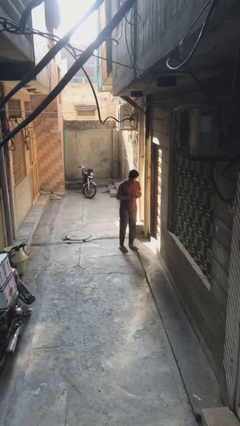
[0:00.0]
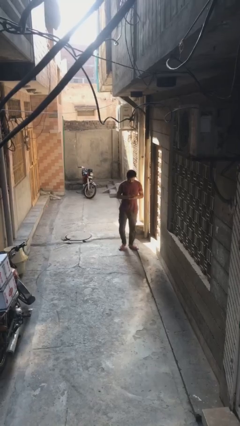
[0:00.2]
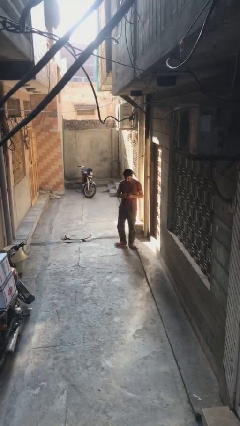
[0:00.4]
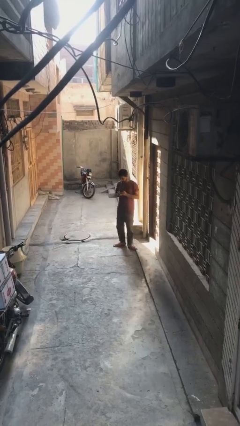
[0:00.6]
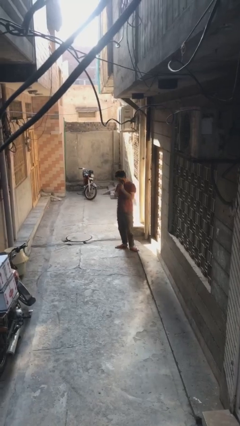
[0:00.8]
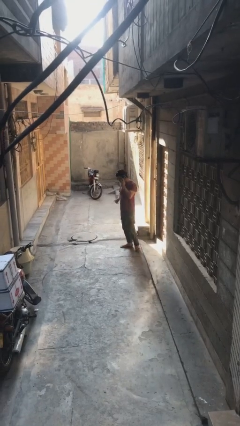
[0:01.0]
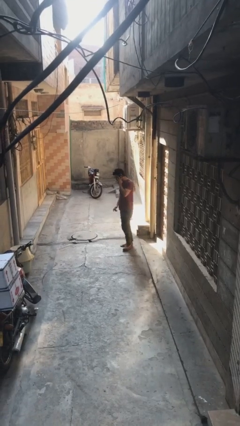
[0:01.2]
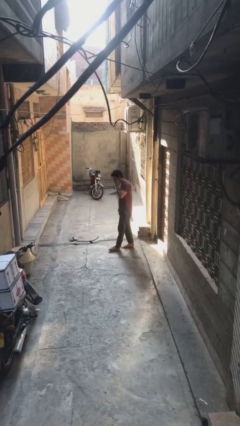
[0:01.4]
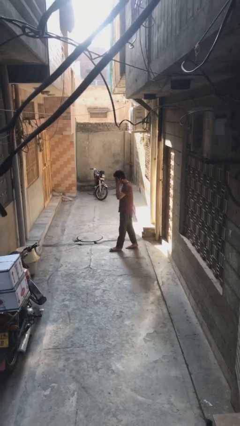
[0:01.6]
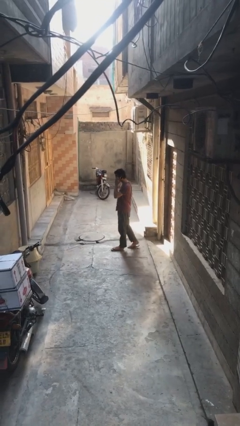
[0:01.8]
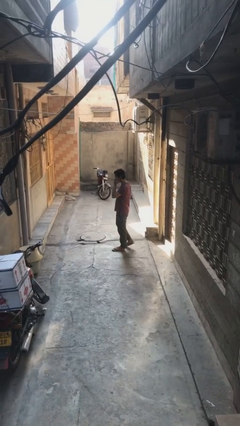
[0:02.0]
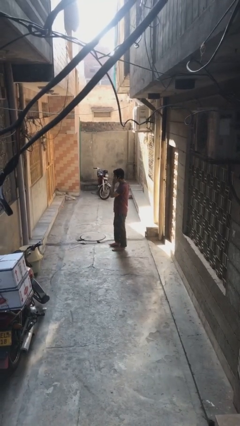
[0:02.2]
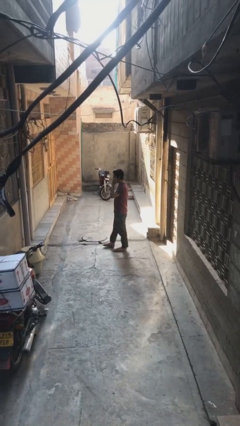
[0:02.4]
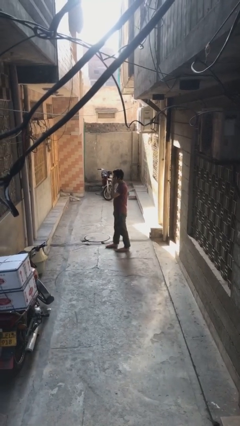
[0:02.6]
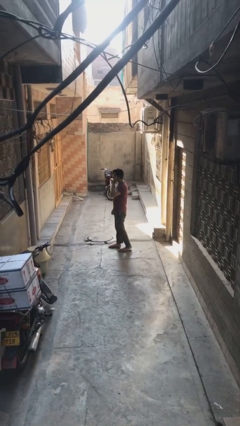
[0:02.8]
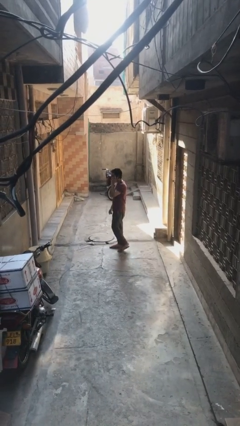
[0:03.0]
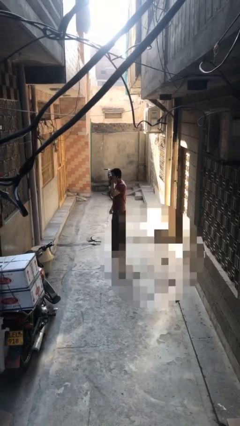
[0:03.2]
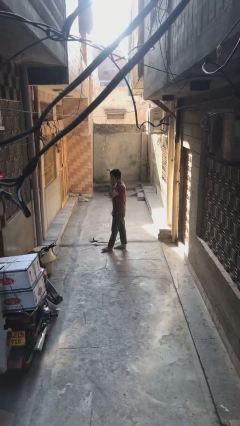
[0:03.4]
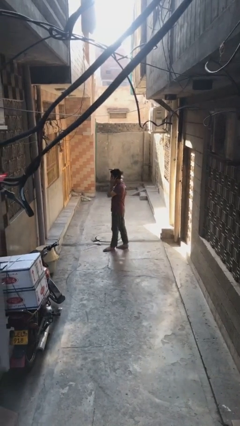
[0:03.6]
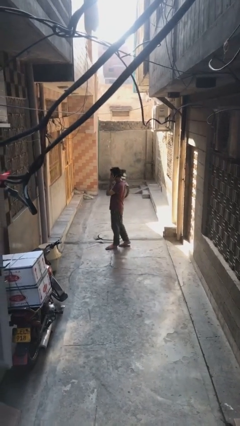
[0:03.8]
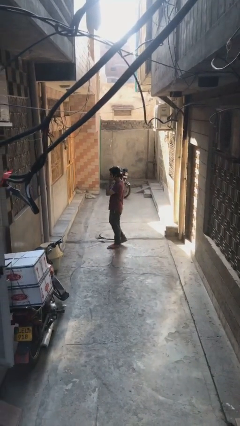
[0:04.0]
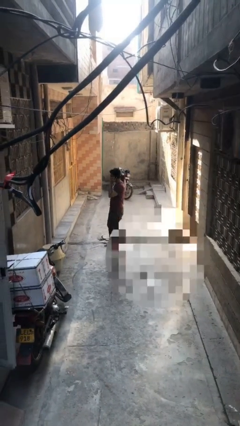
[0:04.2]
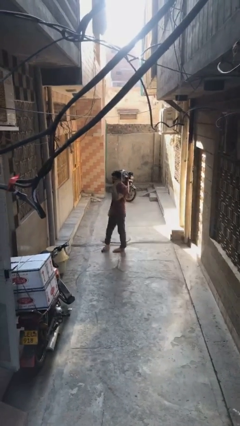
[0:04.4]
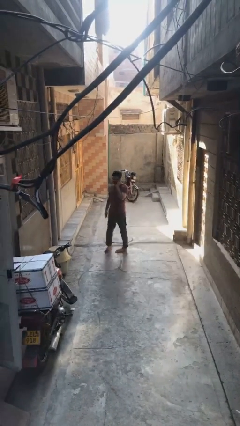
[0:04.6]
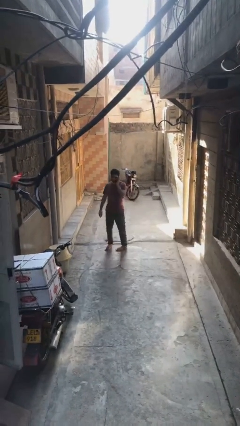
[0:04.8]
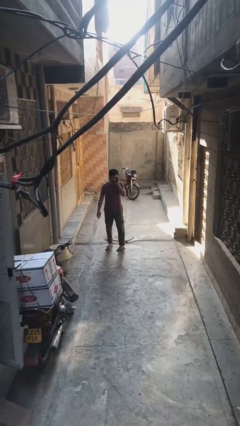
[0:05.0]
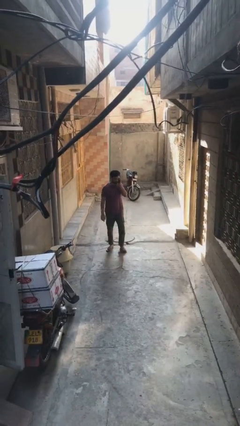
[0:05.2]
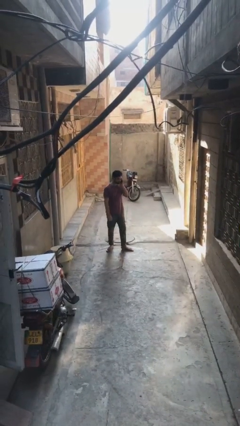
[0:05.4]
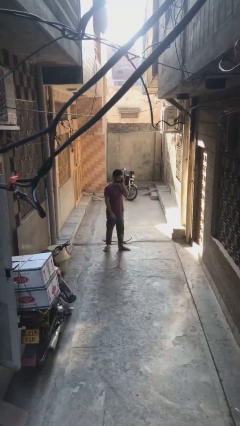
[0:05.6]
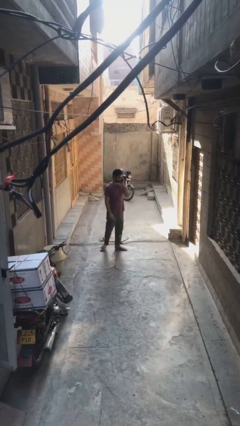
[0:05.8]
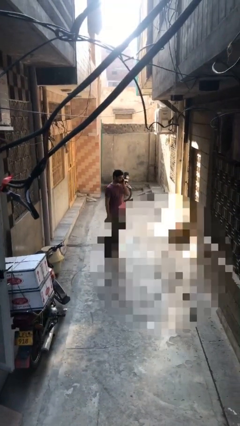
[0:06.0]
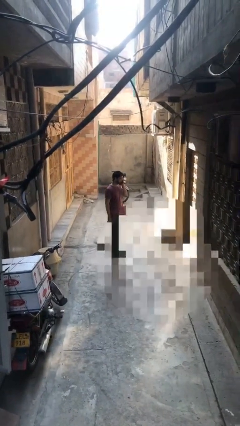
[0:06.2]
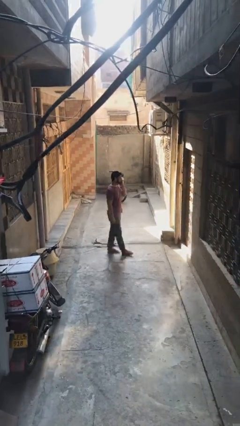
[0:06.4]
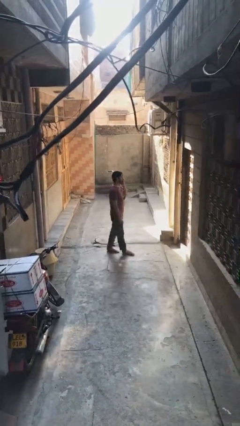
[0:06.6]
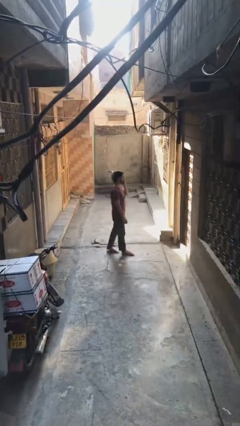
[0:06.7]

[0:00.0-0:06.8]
person talks on phone

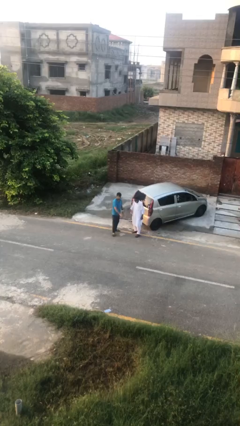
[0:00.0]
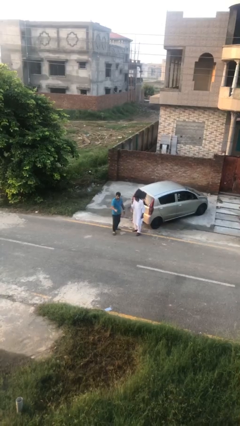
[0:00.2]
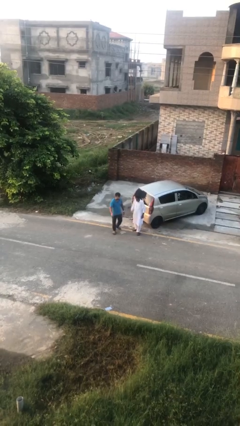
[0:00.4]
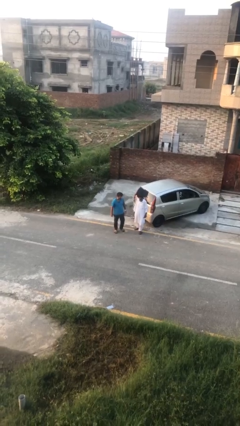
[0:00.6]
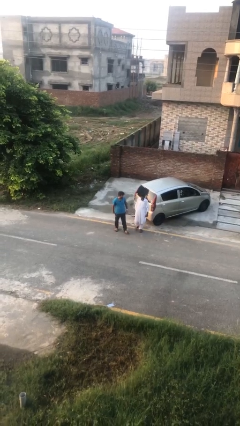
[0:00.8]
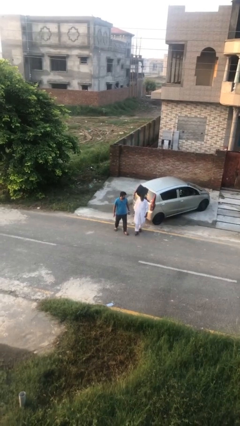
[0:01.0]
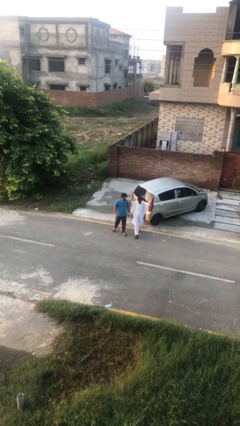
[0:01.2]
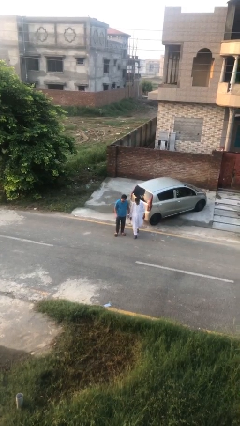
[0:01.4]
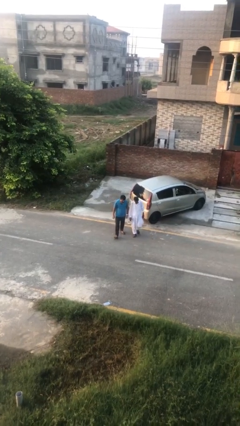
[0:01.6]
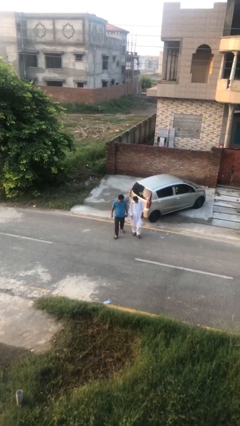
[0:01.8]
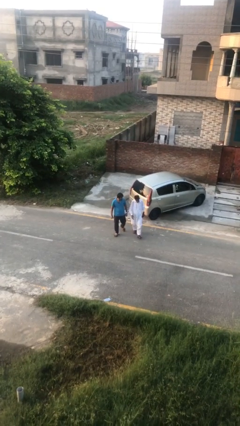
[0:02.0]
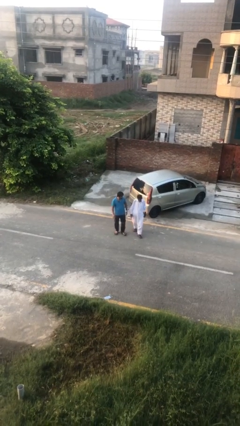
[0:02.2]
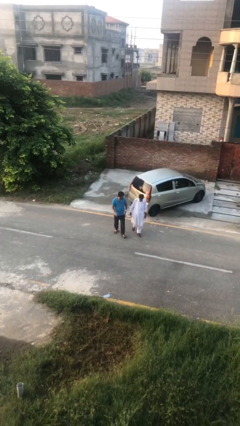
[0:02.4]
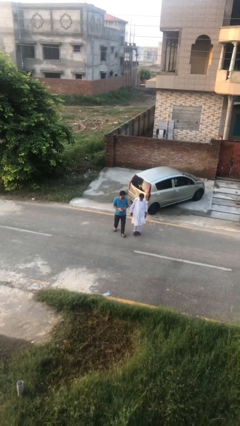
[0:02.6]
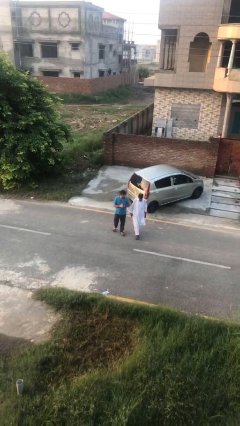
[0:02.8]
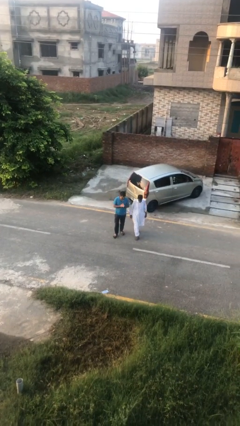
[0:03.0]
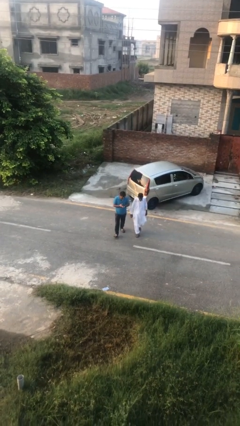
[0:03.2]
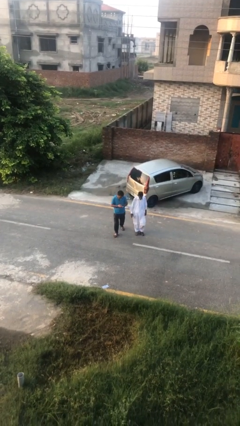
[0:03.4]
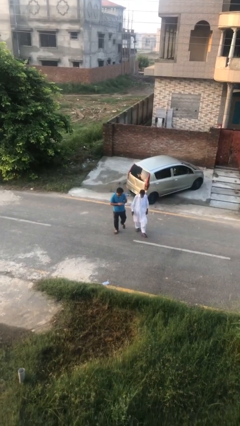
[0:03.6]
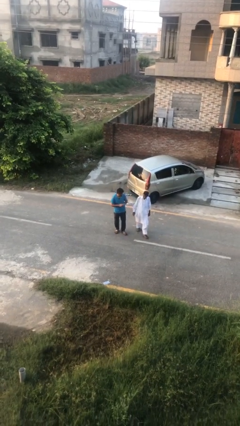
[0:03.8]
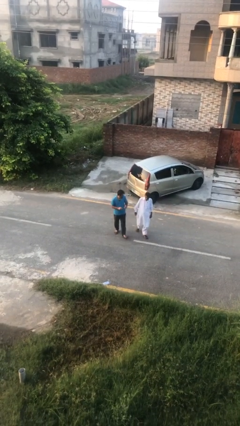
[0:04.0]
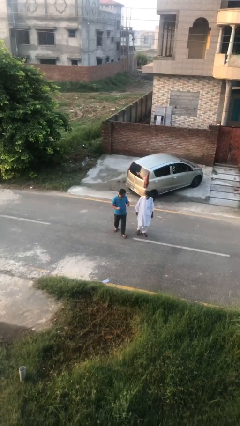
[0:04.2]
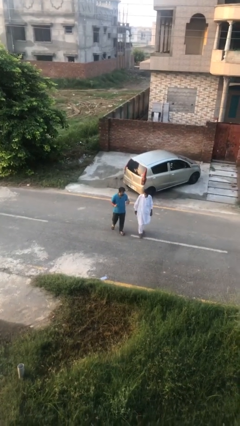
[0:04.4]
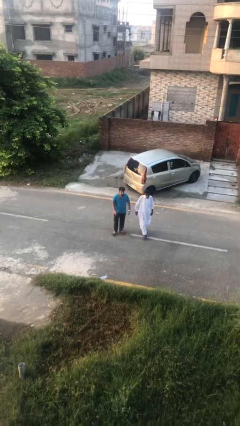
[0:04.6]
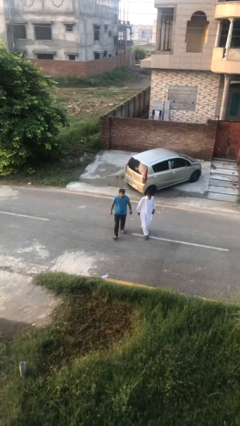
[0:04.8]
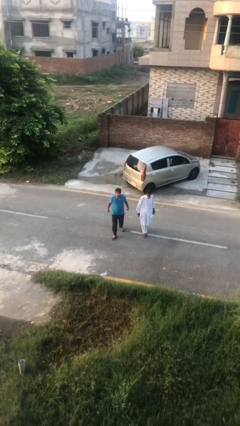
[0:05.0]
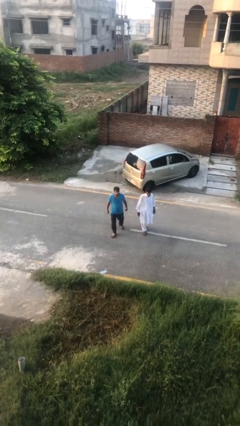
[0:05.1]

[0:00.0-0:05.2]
person talks to person

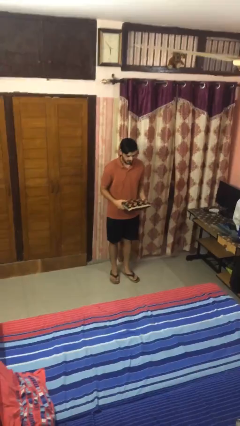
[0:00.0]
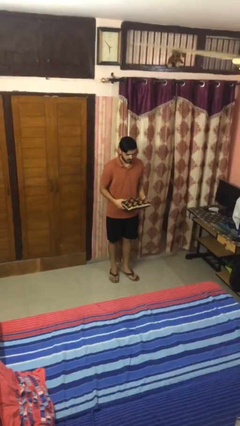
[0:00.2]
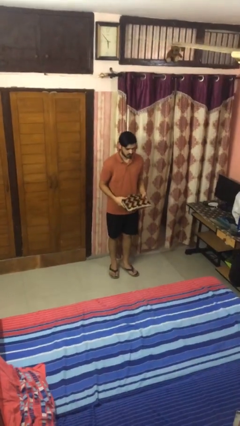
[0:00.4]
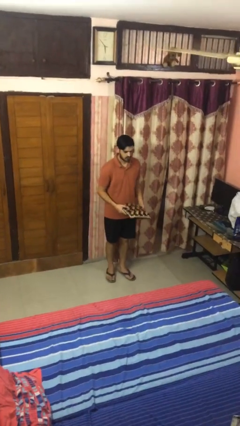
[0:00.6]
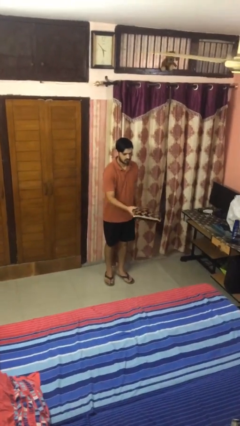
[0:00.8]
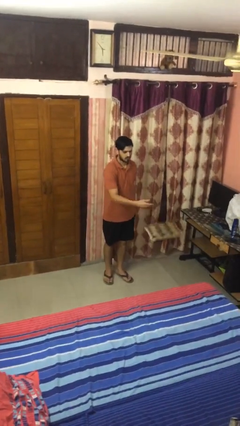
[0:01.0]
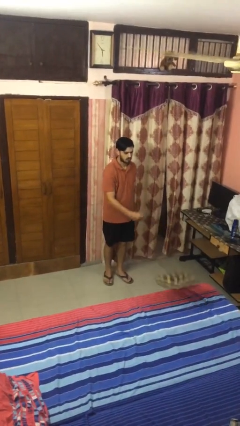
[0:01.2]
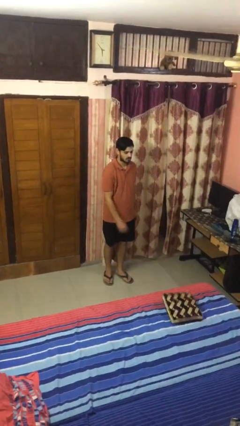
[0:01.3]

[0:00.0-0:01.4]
person throws object on bed

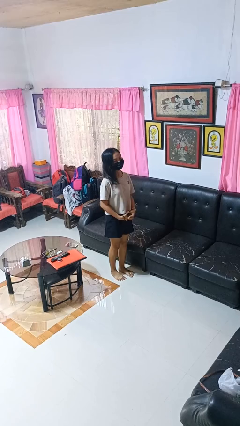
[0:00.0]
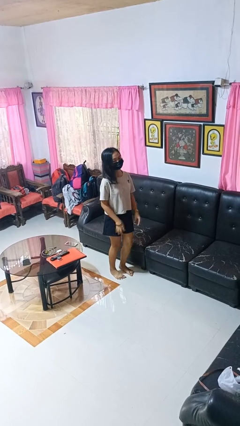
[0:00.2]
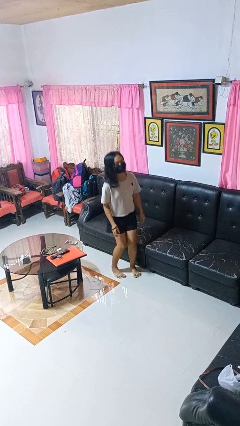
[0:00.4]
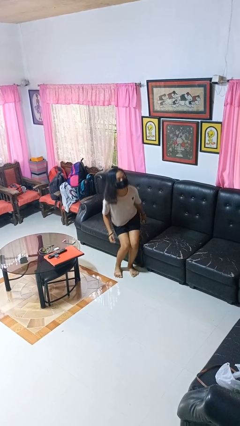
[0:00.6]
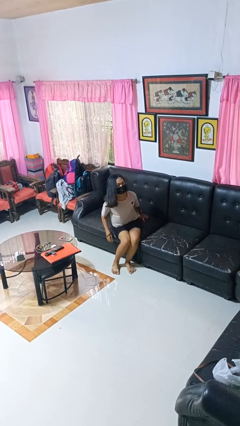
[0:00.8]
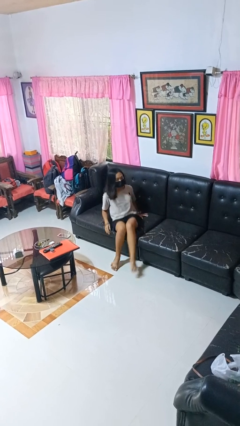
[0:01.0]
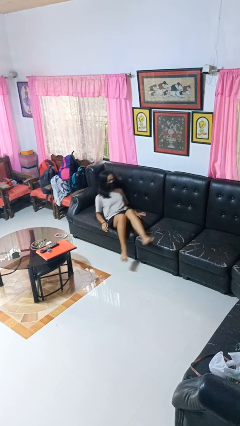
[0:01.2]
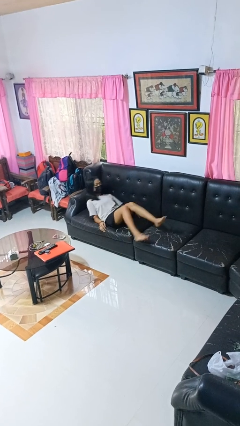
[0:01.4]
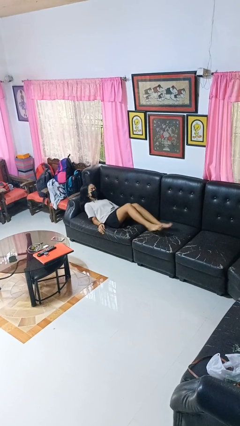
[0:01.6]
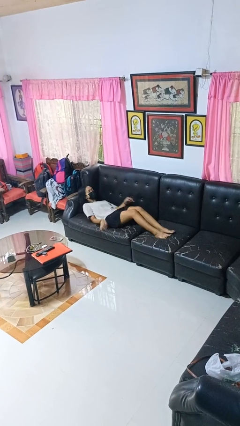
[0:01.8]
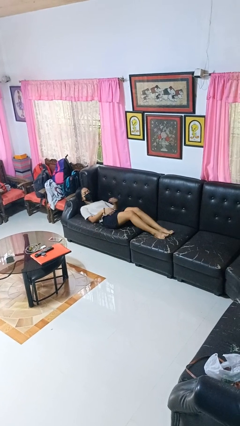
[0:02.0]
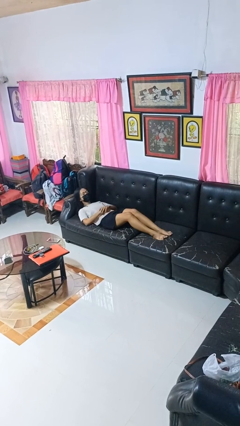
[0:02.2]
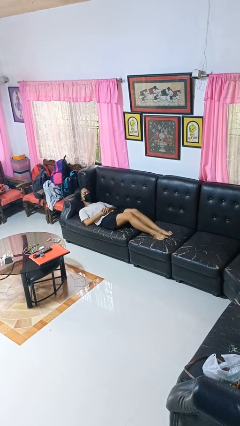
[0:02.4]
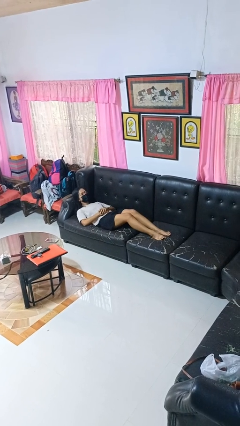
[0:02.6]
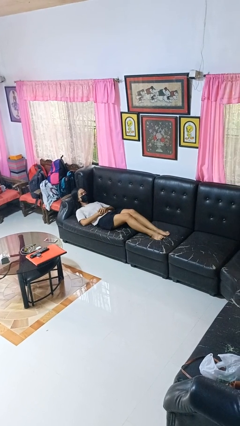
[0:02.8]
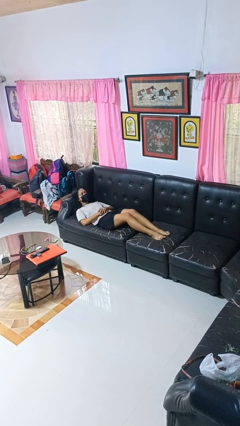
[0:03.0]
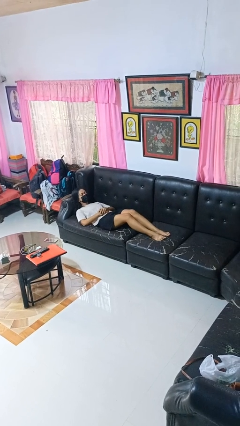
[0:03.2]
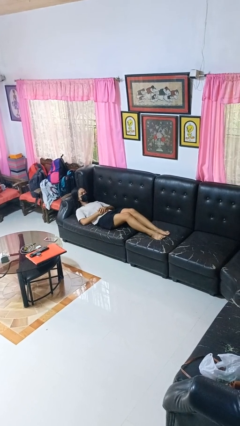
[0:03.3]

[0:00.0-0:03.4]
person lies down on couch

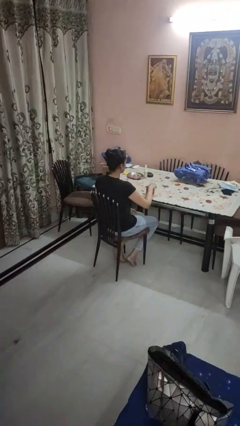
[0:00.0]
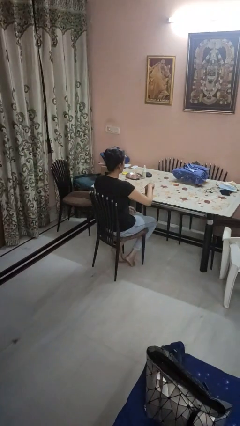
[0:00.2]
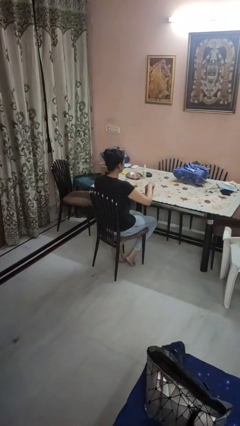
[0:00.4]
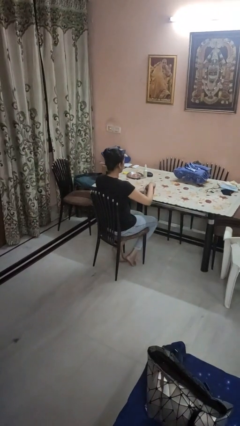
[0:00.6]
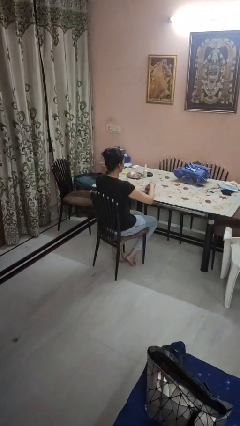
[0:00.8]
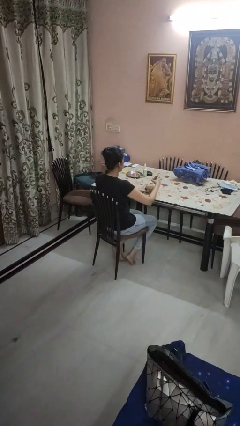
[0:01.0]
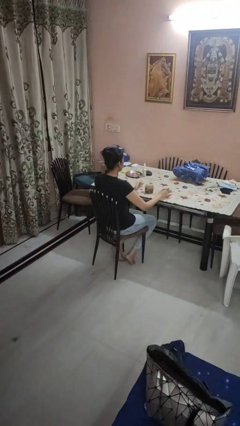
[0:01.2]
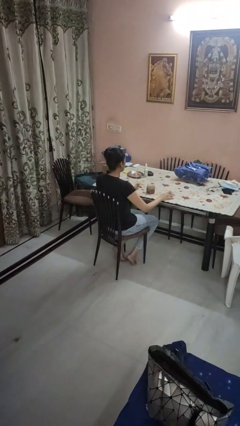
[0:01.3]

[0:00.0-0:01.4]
person opens jar
